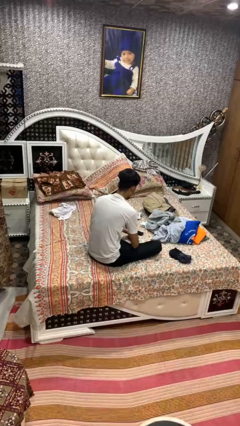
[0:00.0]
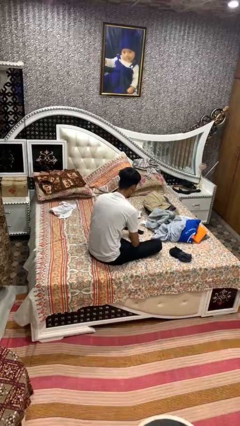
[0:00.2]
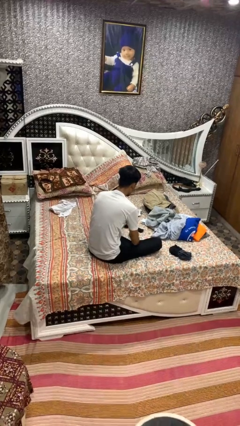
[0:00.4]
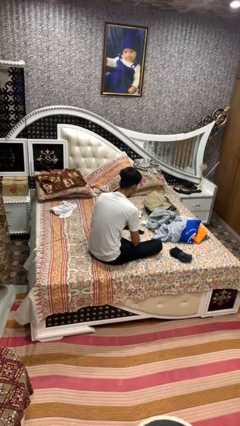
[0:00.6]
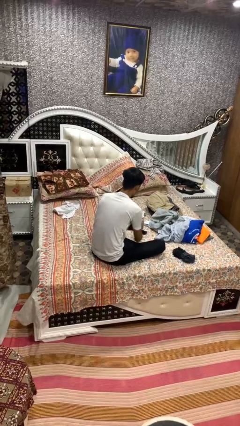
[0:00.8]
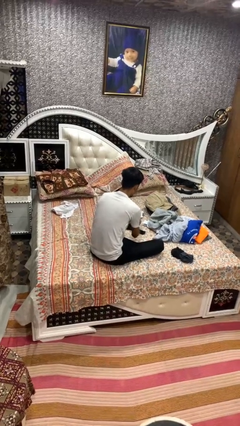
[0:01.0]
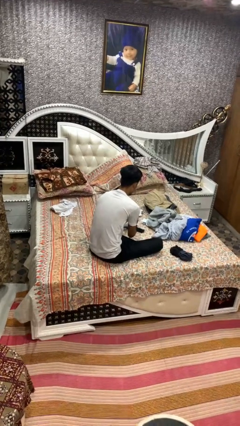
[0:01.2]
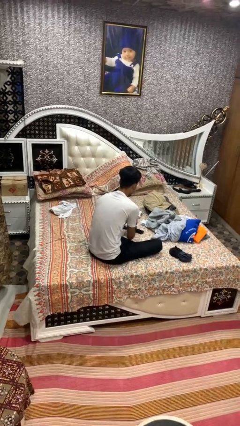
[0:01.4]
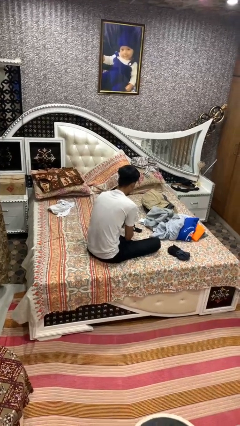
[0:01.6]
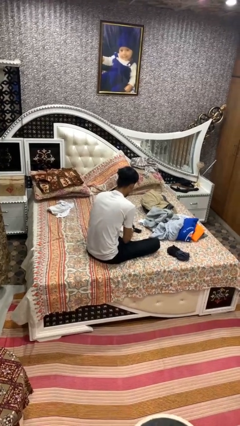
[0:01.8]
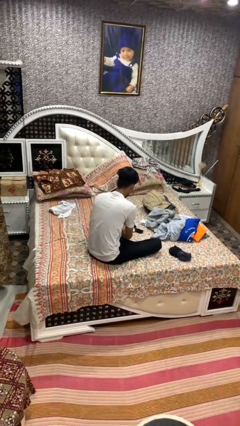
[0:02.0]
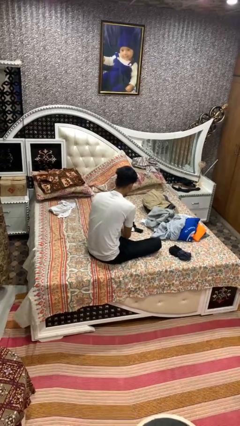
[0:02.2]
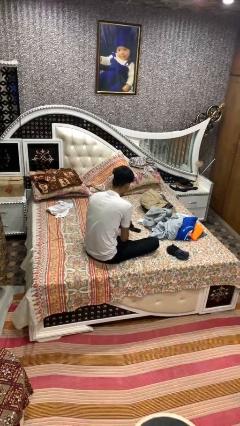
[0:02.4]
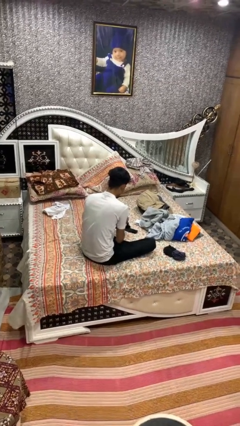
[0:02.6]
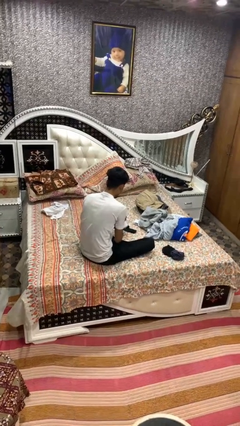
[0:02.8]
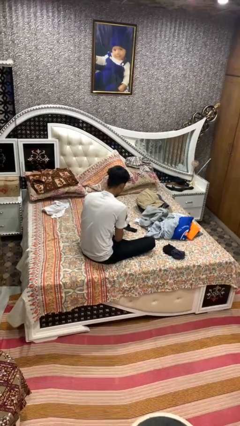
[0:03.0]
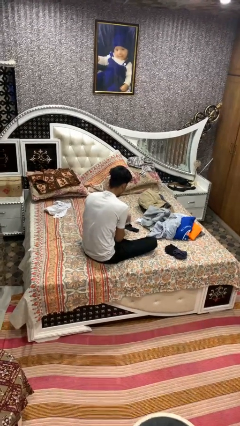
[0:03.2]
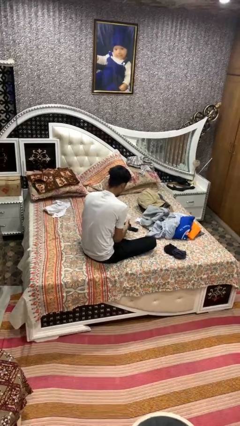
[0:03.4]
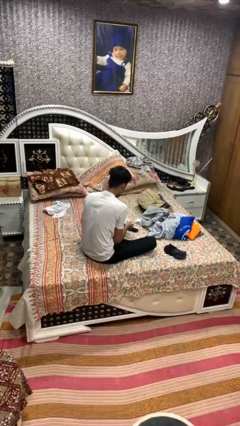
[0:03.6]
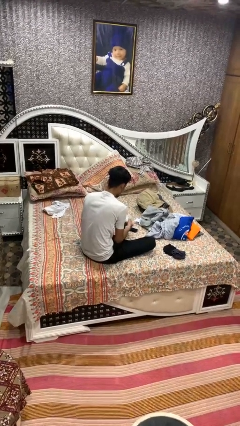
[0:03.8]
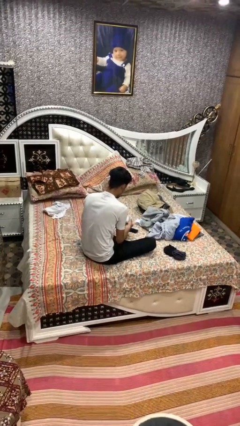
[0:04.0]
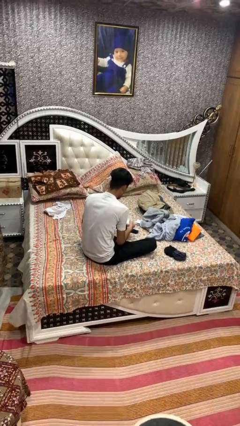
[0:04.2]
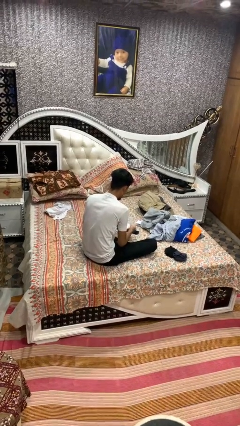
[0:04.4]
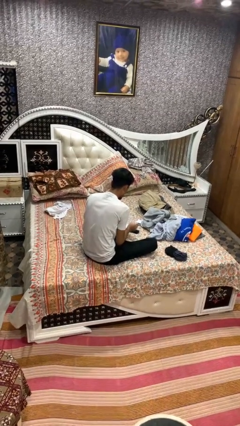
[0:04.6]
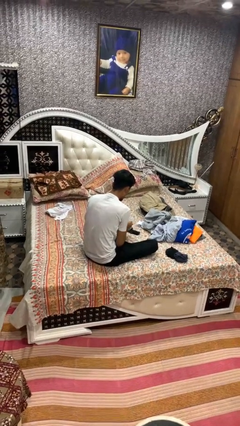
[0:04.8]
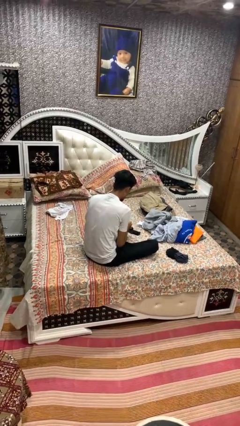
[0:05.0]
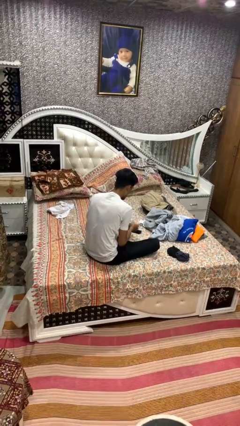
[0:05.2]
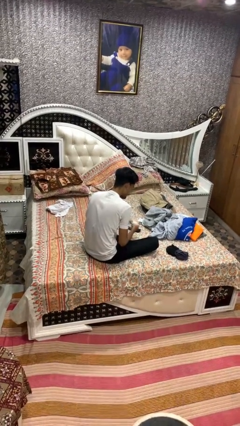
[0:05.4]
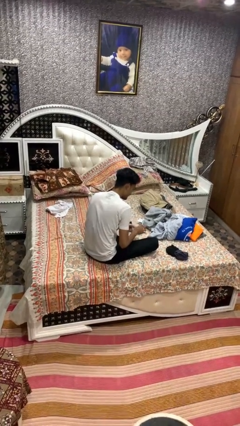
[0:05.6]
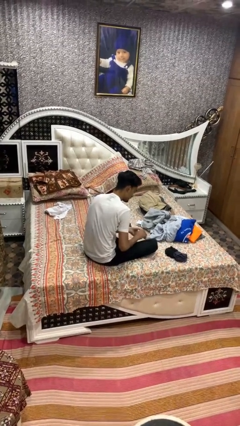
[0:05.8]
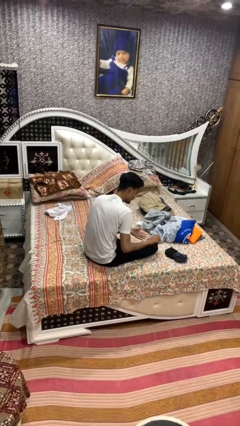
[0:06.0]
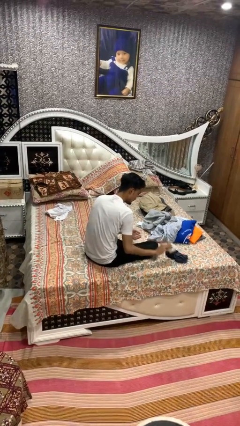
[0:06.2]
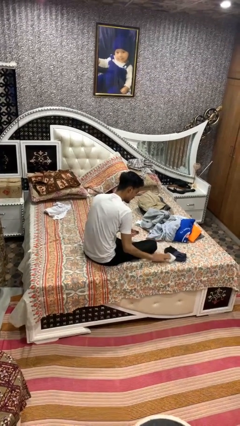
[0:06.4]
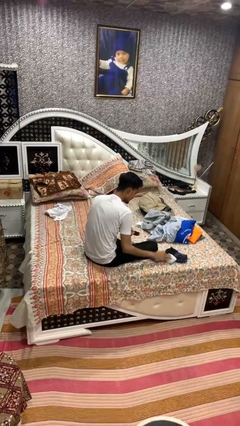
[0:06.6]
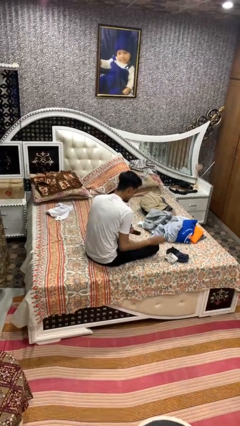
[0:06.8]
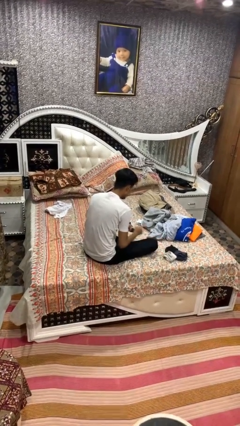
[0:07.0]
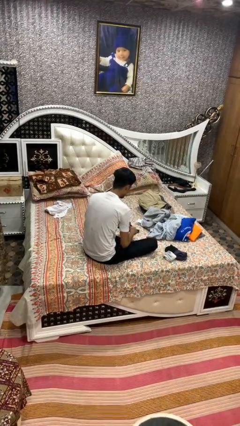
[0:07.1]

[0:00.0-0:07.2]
person folds socks

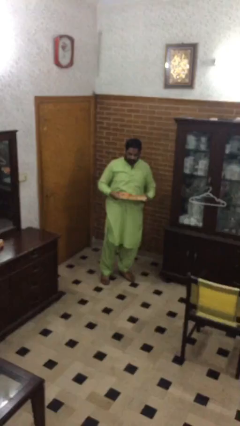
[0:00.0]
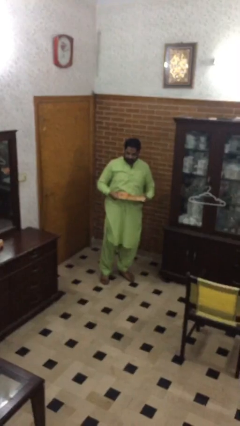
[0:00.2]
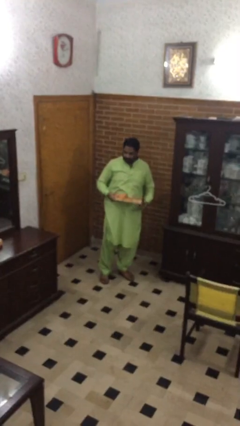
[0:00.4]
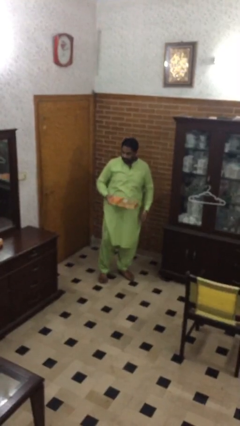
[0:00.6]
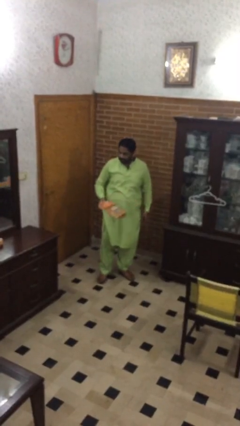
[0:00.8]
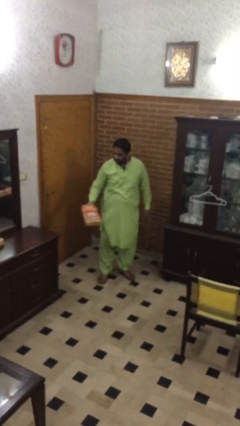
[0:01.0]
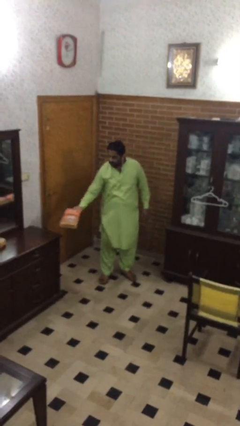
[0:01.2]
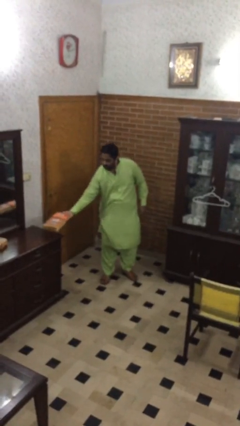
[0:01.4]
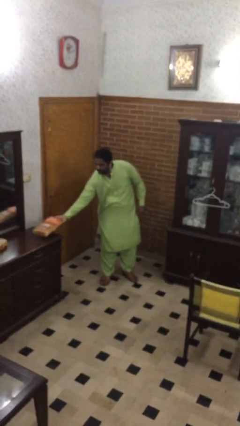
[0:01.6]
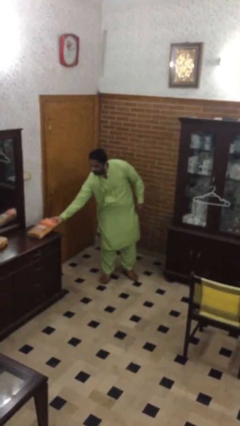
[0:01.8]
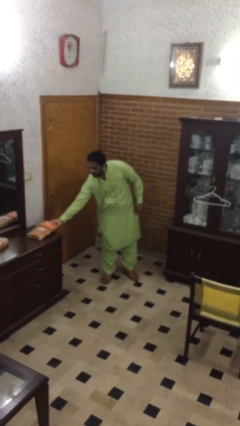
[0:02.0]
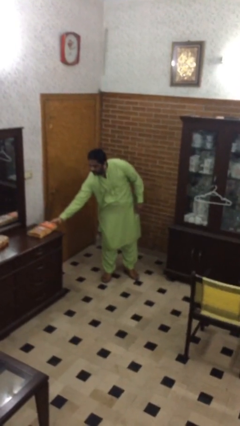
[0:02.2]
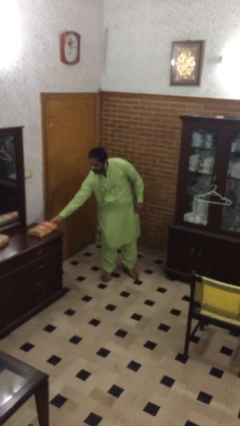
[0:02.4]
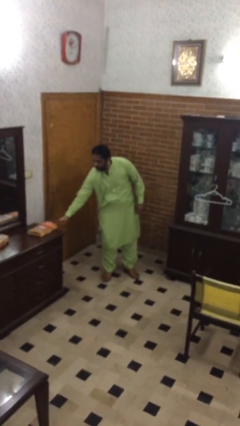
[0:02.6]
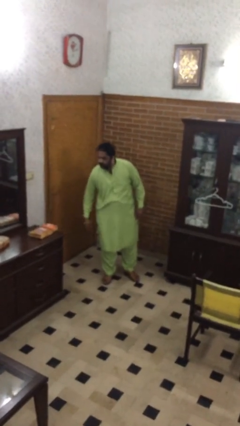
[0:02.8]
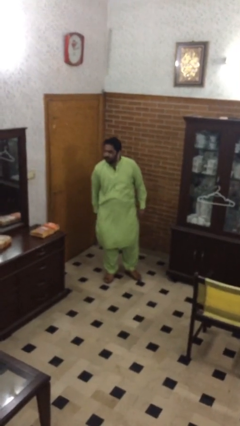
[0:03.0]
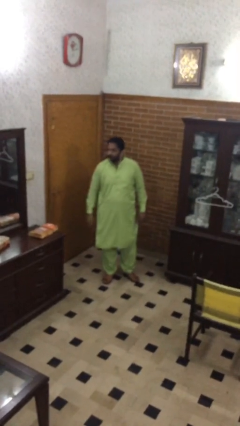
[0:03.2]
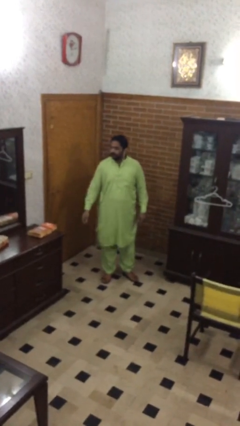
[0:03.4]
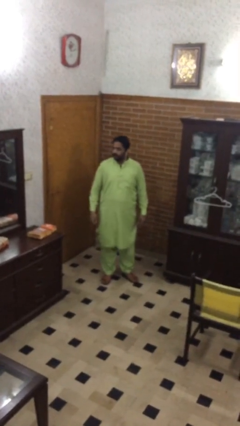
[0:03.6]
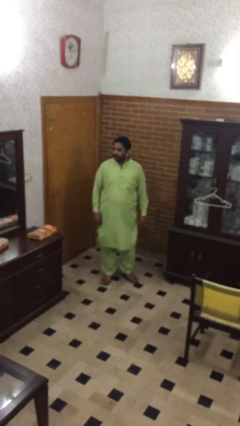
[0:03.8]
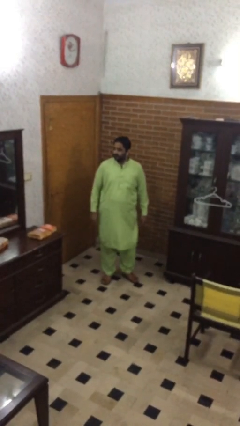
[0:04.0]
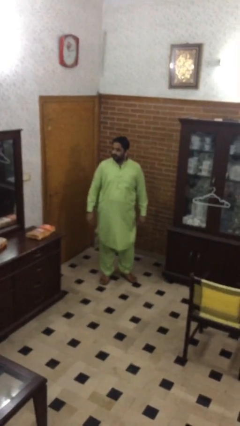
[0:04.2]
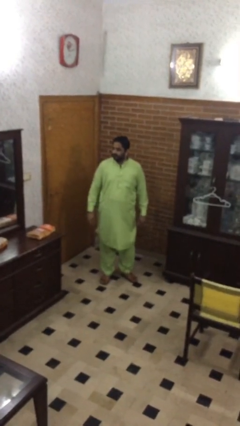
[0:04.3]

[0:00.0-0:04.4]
person puts down object on table

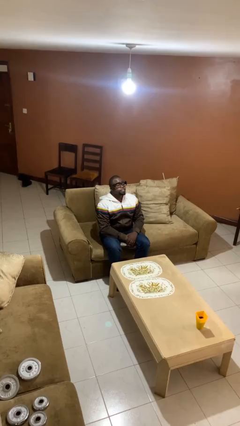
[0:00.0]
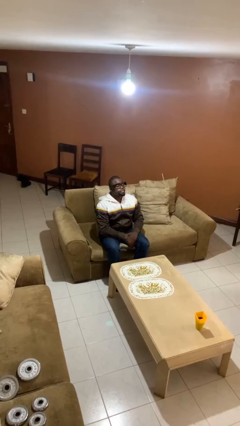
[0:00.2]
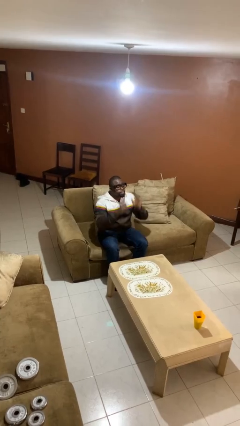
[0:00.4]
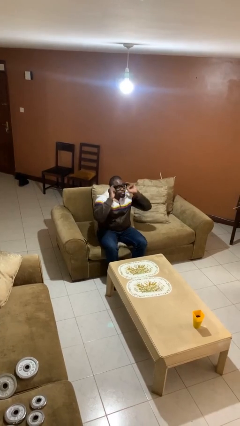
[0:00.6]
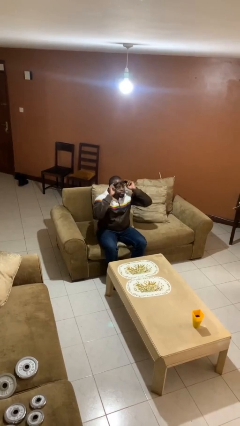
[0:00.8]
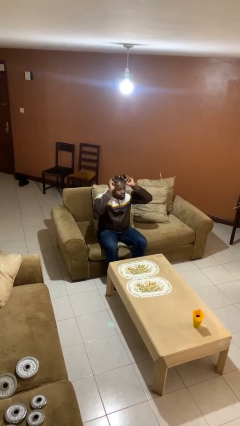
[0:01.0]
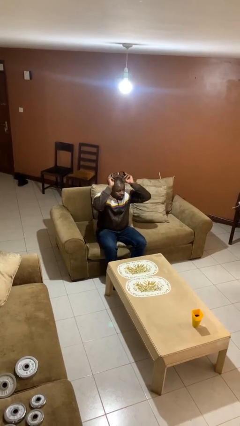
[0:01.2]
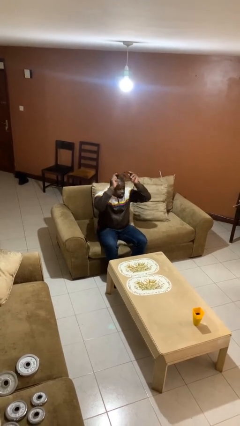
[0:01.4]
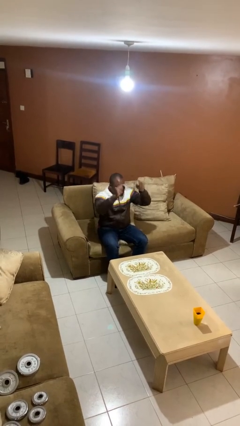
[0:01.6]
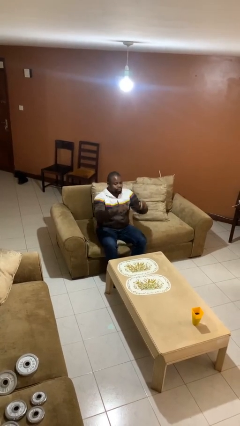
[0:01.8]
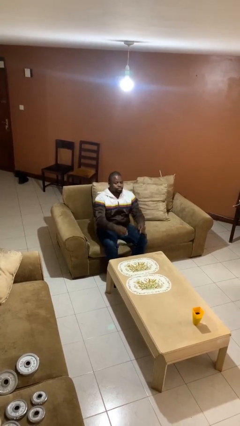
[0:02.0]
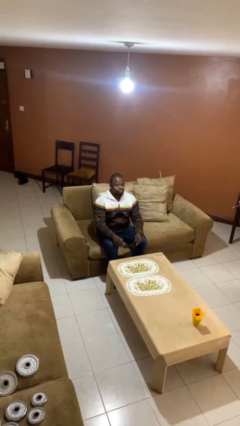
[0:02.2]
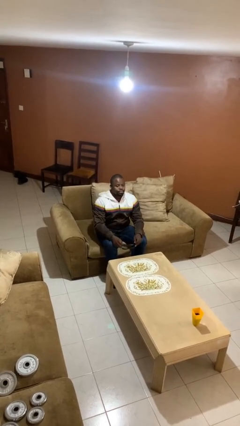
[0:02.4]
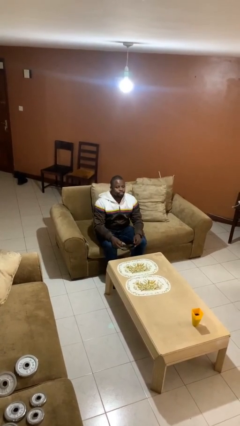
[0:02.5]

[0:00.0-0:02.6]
person takes off glasses

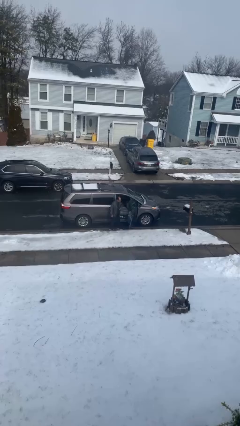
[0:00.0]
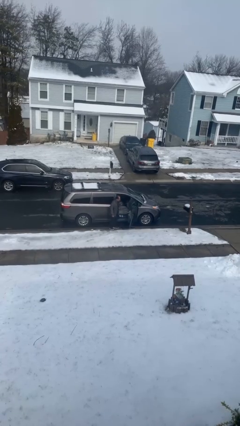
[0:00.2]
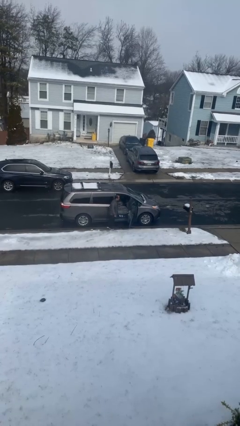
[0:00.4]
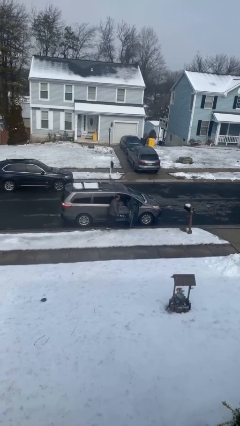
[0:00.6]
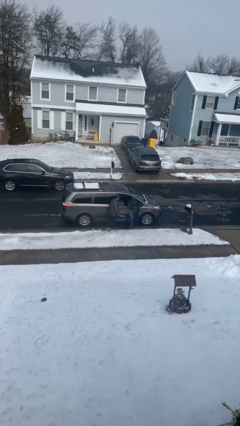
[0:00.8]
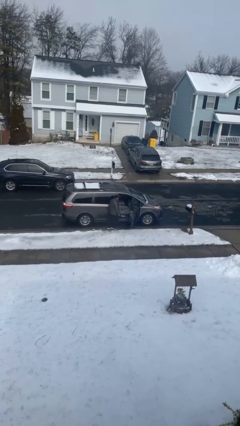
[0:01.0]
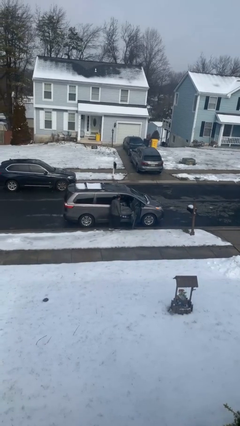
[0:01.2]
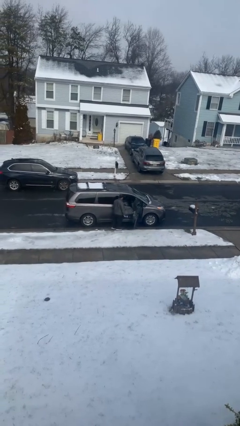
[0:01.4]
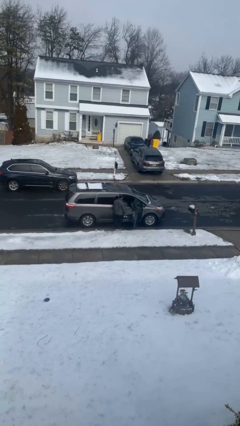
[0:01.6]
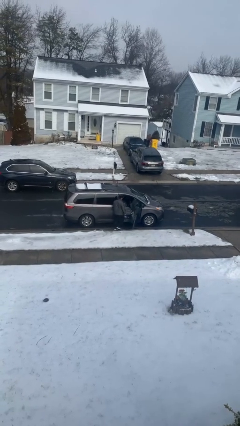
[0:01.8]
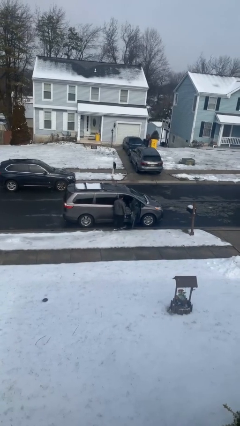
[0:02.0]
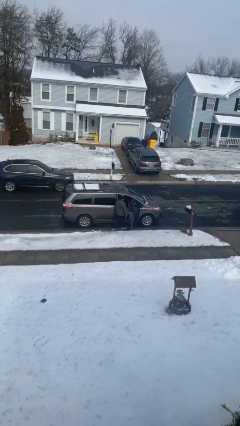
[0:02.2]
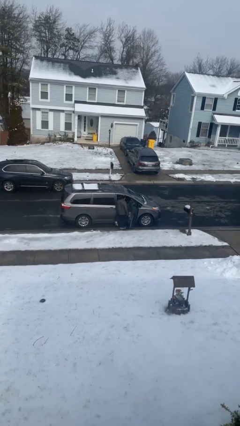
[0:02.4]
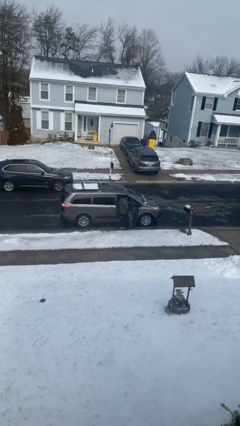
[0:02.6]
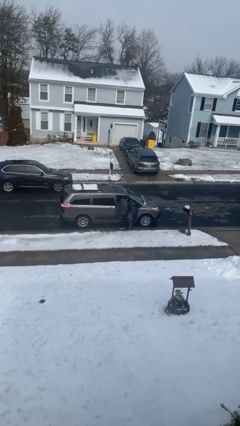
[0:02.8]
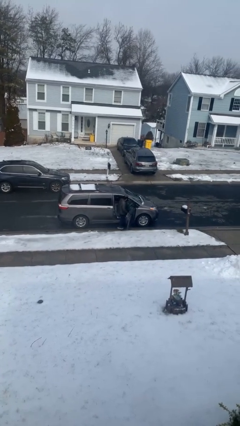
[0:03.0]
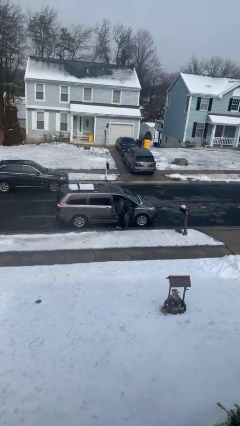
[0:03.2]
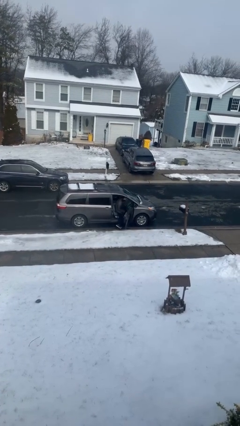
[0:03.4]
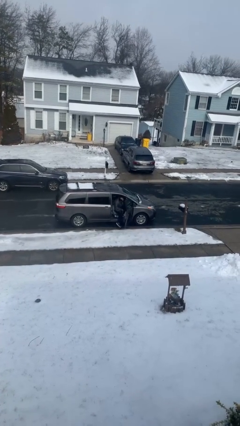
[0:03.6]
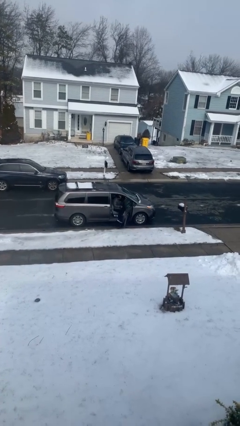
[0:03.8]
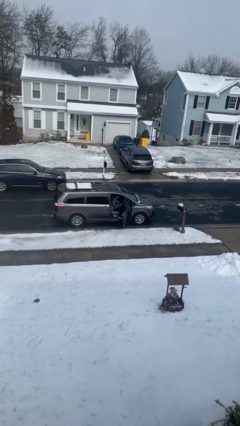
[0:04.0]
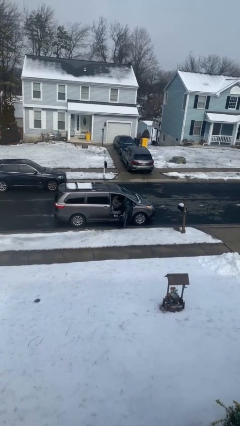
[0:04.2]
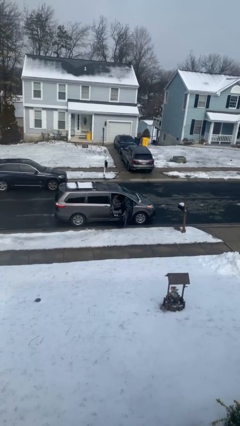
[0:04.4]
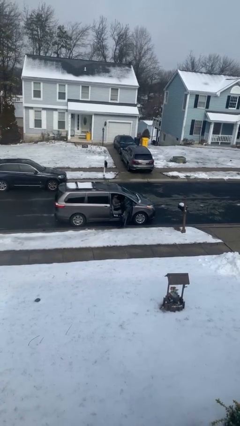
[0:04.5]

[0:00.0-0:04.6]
person enters car
